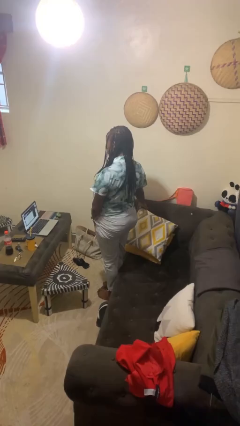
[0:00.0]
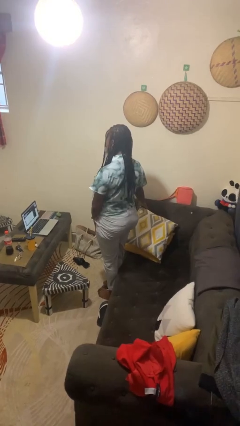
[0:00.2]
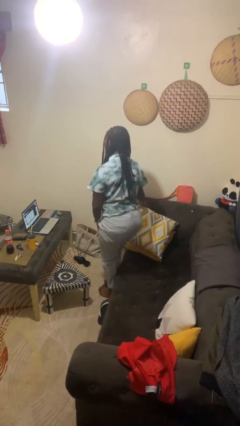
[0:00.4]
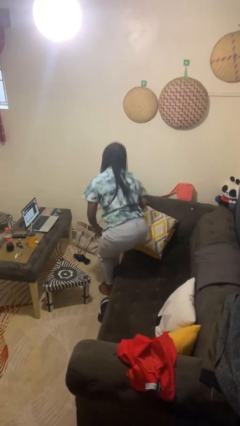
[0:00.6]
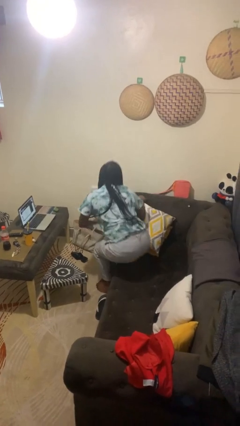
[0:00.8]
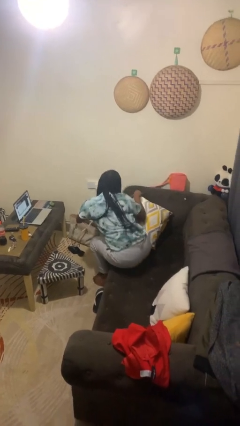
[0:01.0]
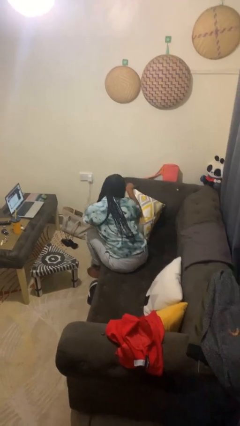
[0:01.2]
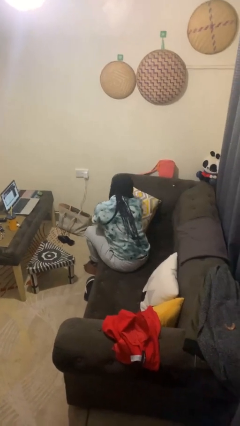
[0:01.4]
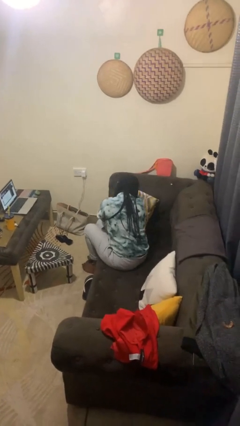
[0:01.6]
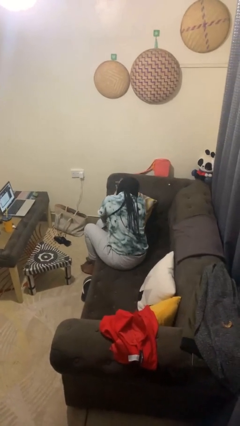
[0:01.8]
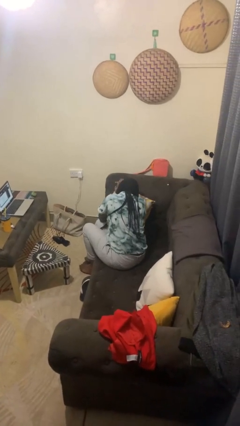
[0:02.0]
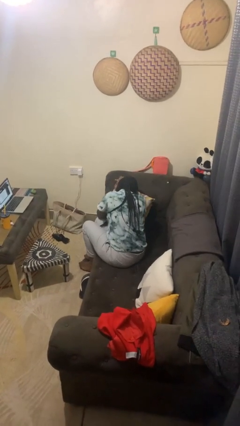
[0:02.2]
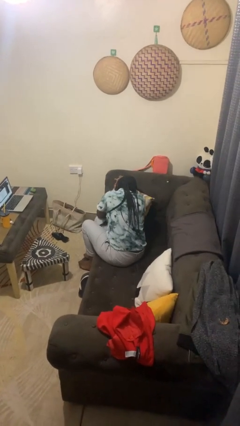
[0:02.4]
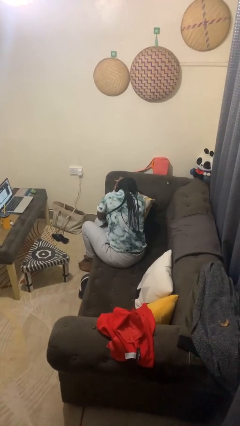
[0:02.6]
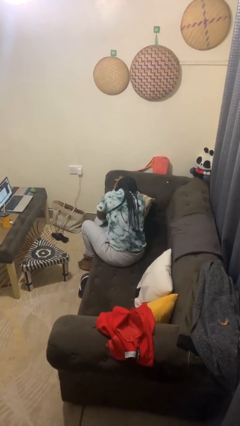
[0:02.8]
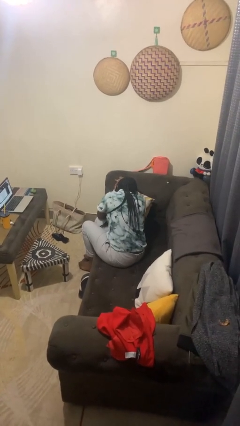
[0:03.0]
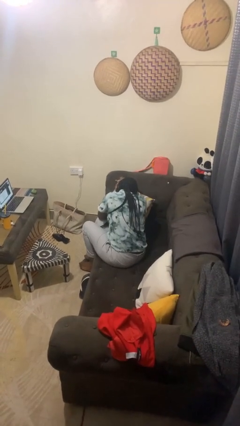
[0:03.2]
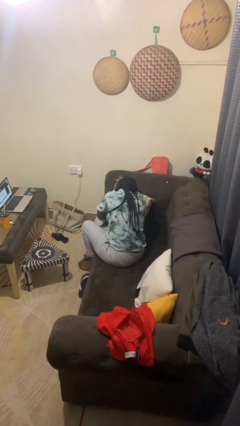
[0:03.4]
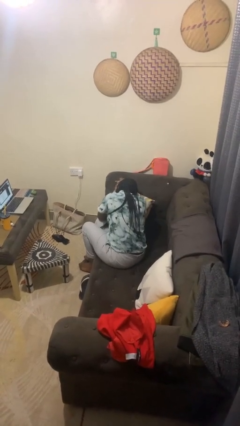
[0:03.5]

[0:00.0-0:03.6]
person lies down on couch

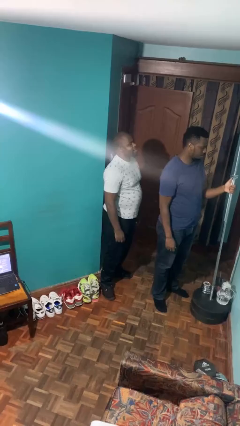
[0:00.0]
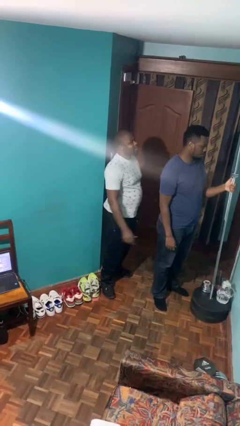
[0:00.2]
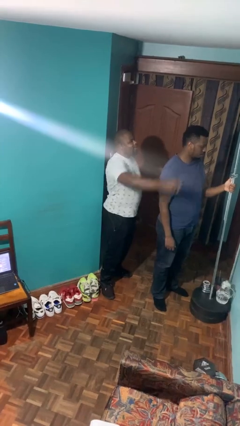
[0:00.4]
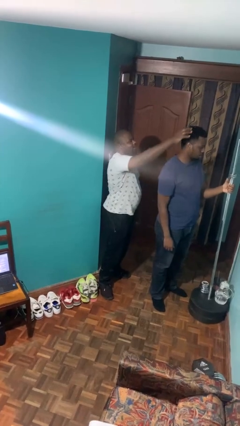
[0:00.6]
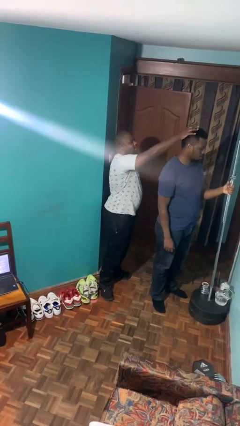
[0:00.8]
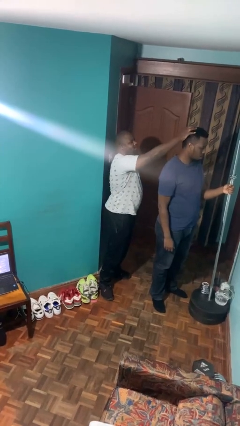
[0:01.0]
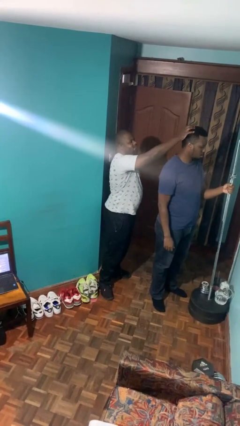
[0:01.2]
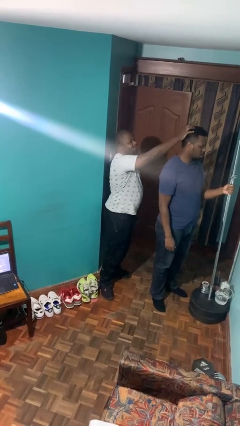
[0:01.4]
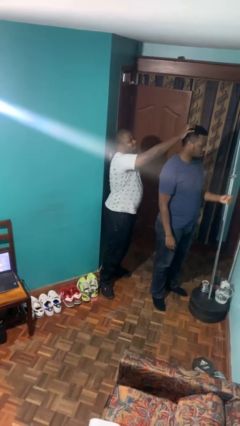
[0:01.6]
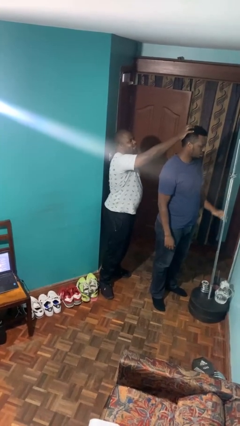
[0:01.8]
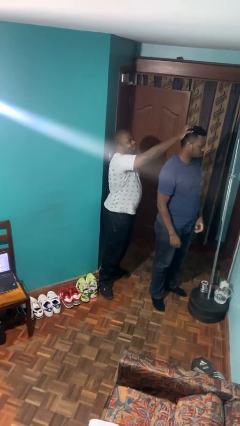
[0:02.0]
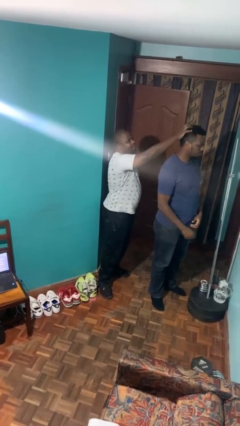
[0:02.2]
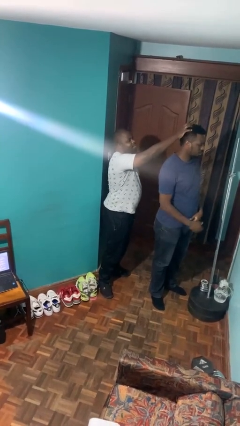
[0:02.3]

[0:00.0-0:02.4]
person grabs person by hair

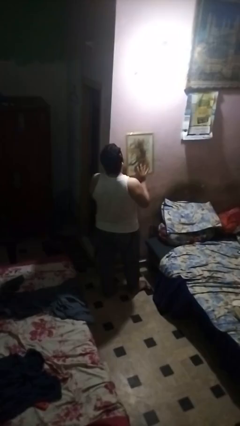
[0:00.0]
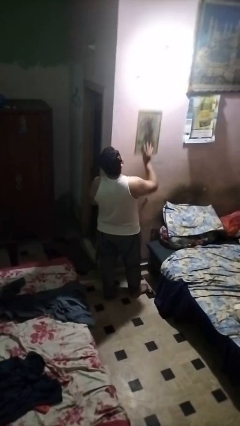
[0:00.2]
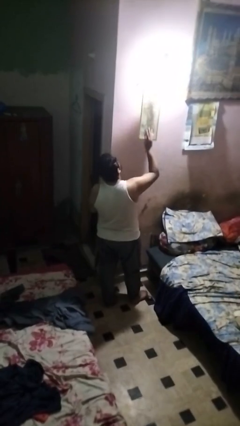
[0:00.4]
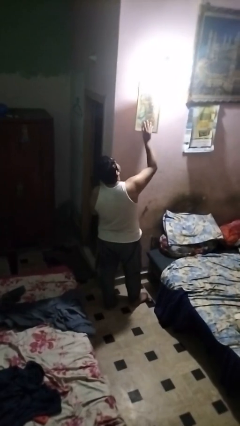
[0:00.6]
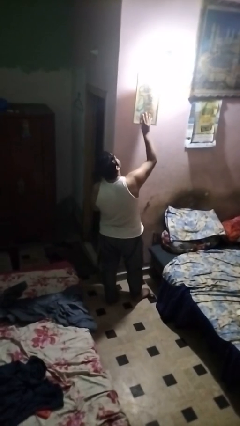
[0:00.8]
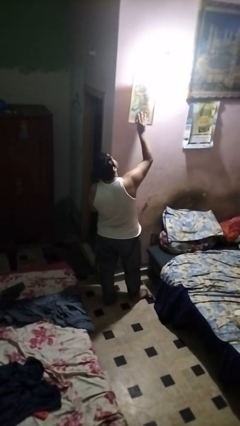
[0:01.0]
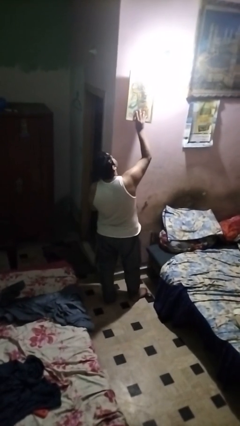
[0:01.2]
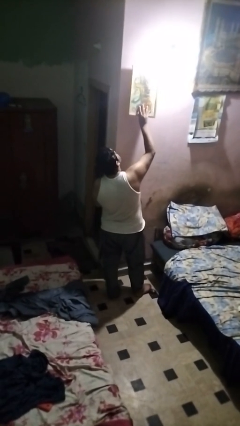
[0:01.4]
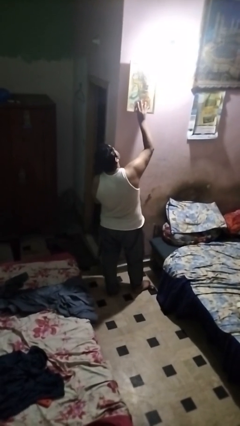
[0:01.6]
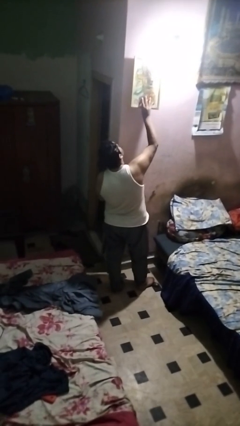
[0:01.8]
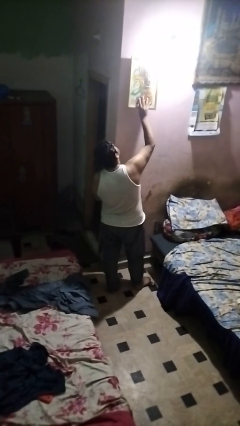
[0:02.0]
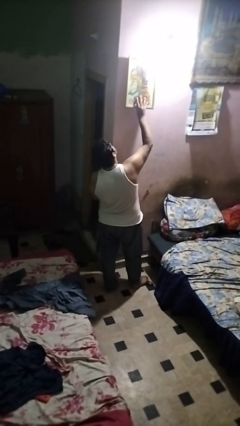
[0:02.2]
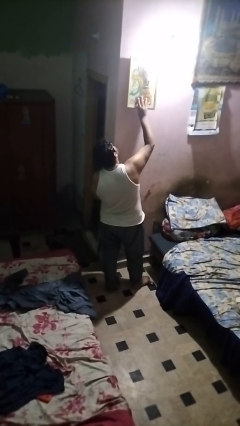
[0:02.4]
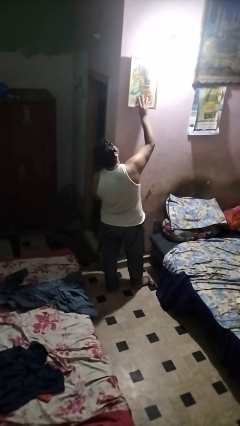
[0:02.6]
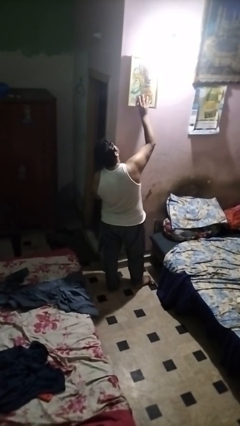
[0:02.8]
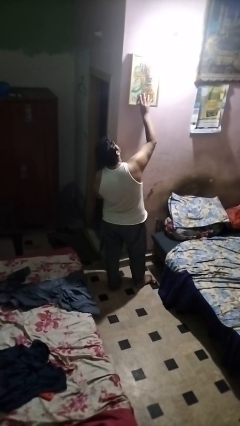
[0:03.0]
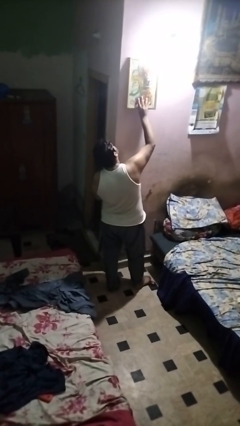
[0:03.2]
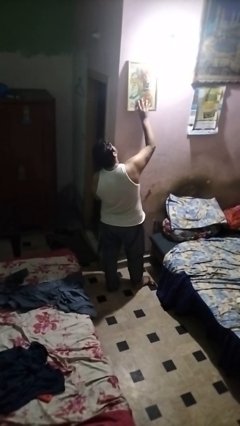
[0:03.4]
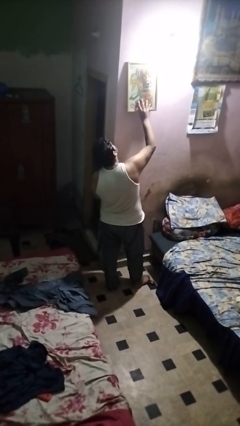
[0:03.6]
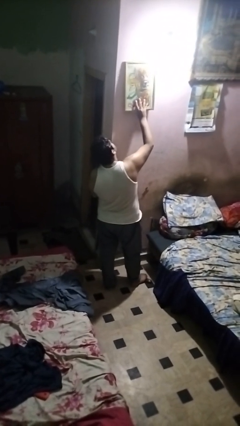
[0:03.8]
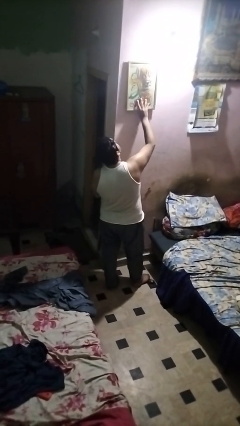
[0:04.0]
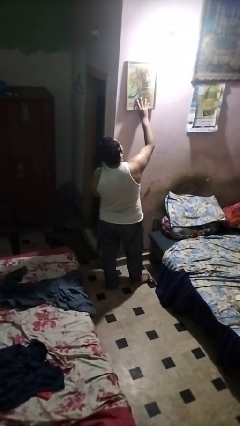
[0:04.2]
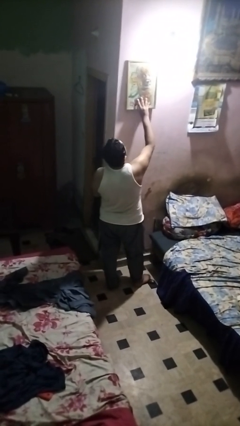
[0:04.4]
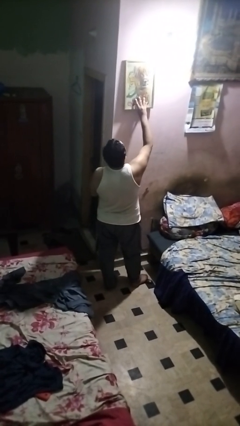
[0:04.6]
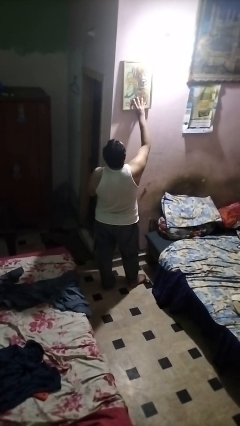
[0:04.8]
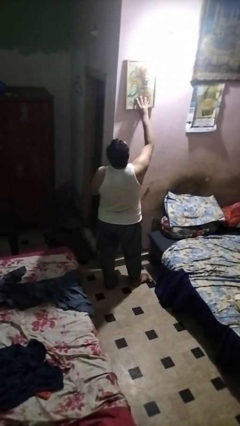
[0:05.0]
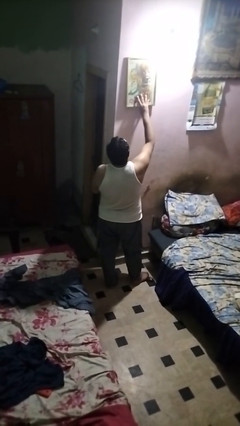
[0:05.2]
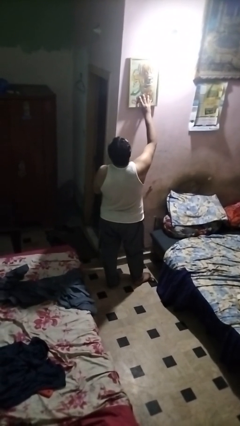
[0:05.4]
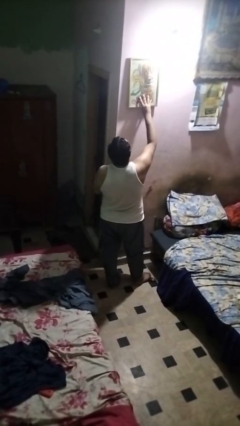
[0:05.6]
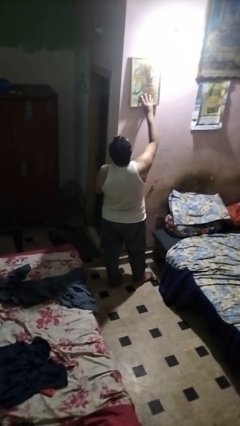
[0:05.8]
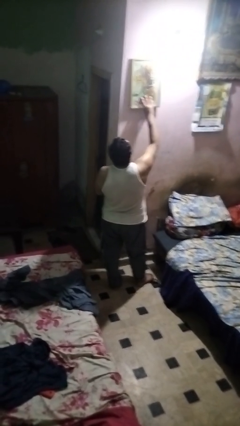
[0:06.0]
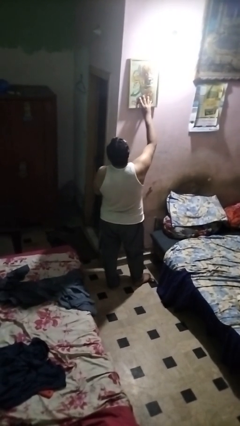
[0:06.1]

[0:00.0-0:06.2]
person puts up picture frame

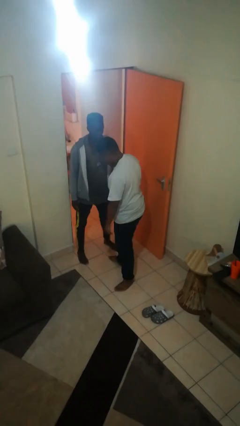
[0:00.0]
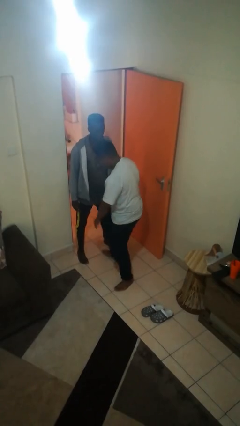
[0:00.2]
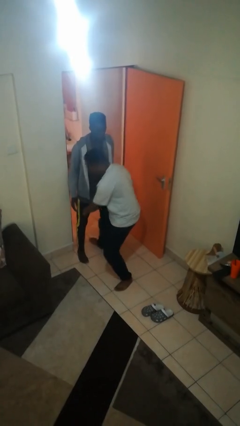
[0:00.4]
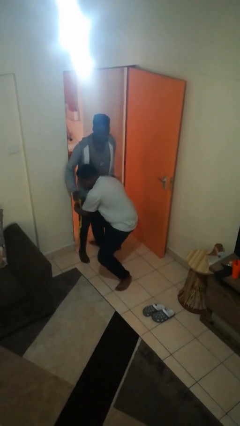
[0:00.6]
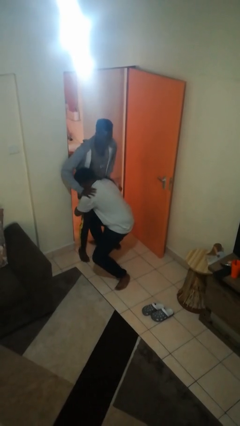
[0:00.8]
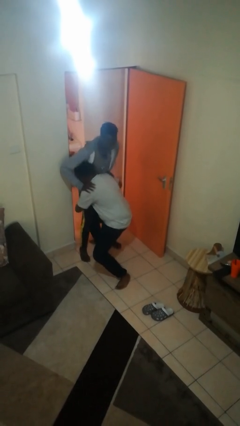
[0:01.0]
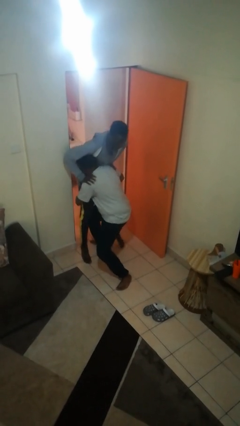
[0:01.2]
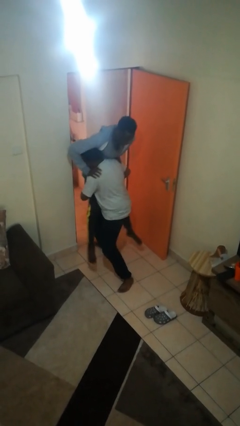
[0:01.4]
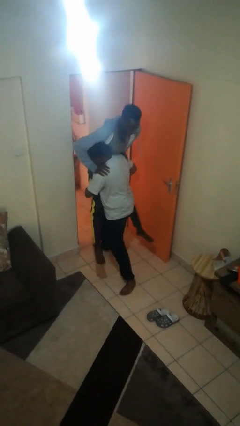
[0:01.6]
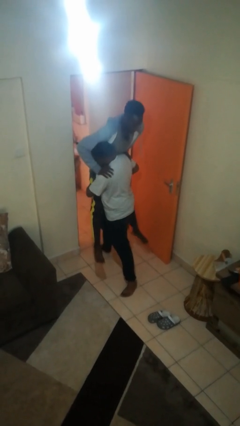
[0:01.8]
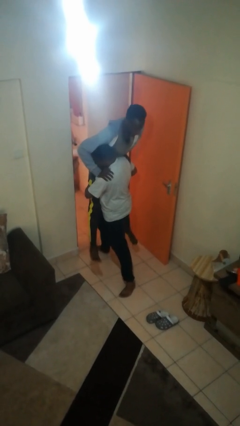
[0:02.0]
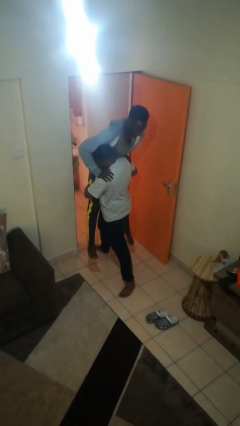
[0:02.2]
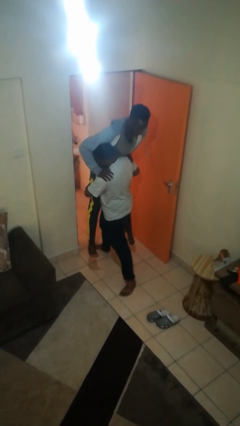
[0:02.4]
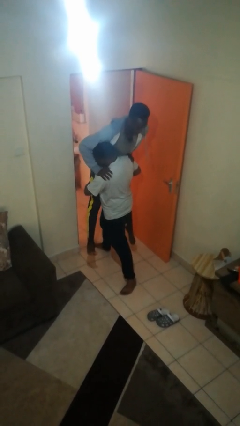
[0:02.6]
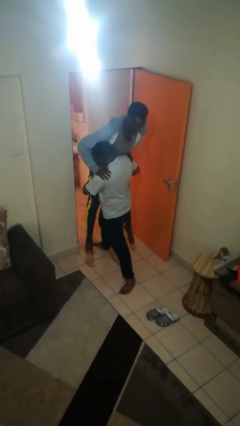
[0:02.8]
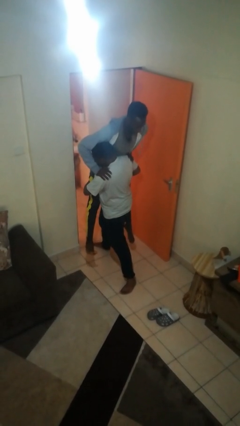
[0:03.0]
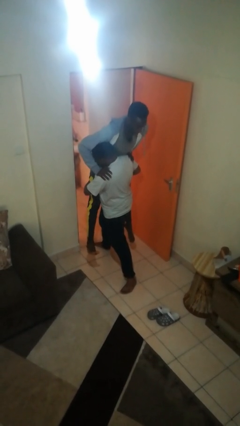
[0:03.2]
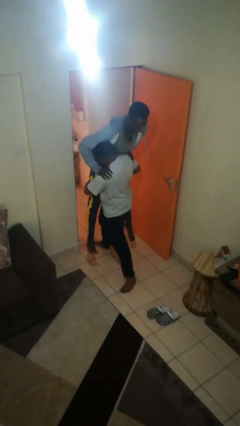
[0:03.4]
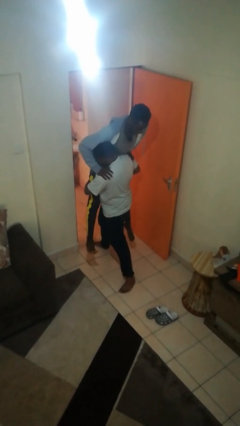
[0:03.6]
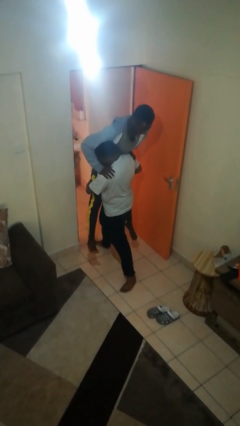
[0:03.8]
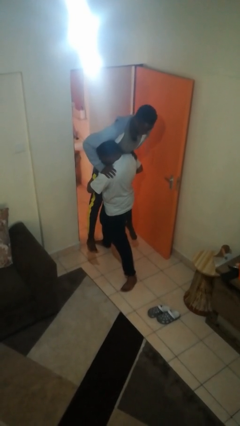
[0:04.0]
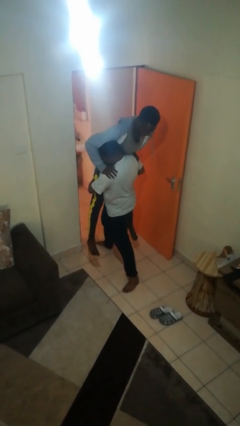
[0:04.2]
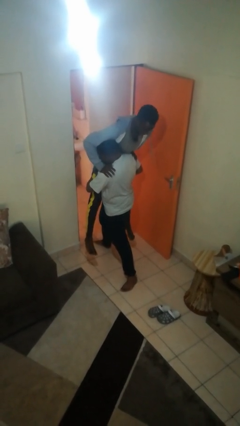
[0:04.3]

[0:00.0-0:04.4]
person picks up person

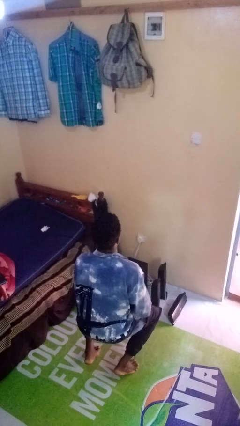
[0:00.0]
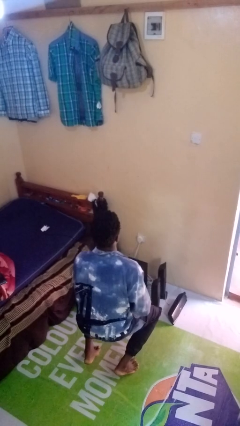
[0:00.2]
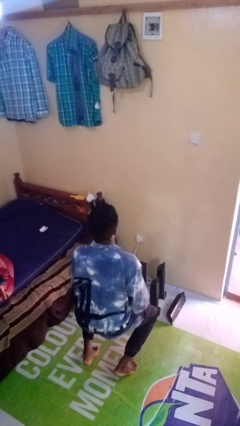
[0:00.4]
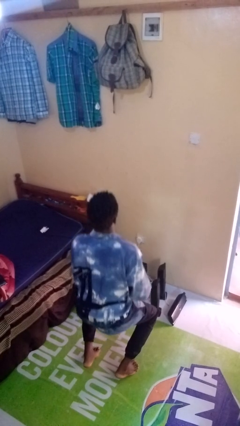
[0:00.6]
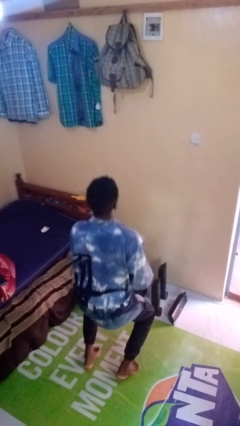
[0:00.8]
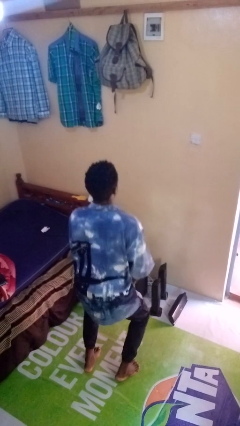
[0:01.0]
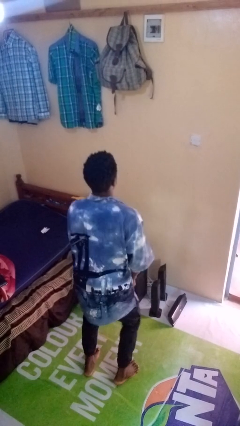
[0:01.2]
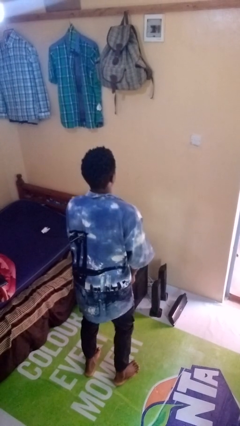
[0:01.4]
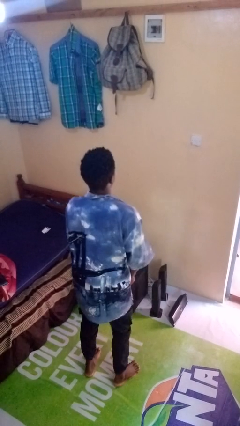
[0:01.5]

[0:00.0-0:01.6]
person stands up
